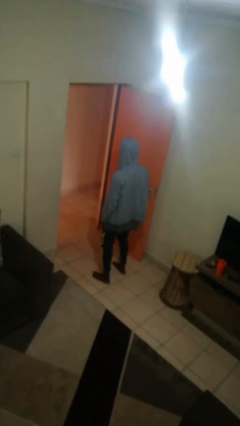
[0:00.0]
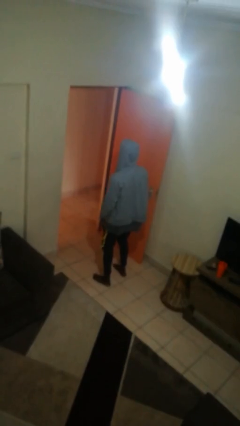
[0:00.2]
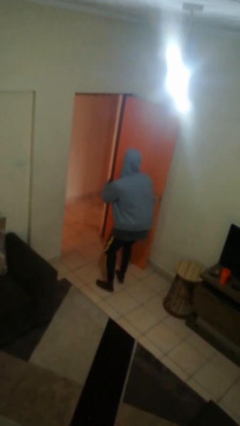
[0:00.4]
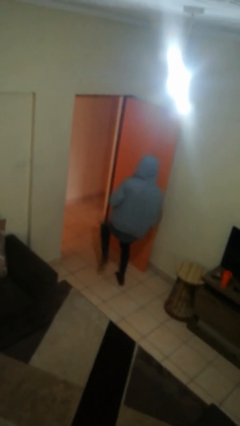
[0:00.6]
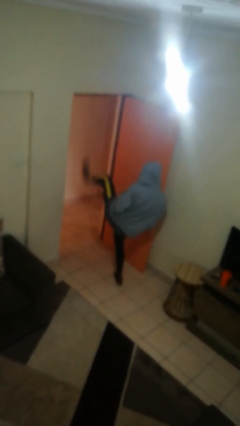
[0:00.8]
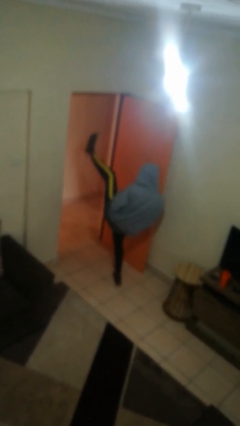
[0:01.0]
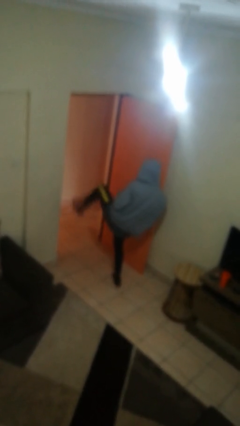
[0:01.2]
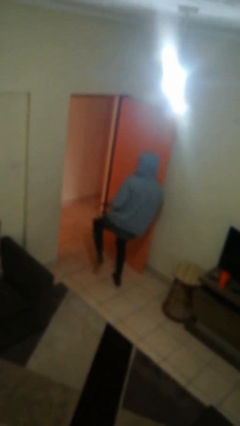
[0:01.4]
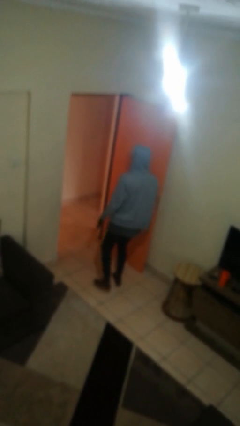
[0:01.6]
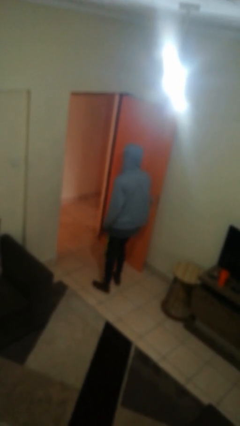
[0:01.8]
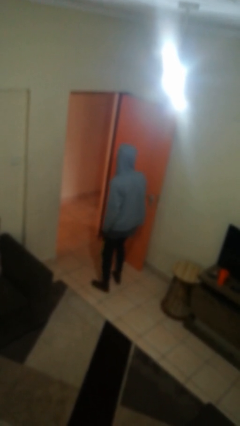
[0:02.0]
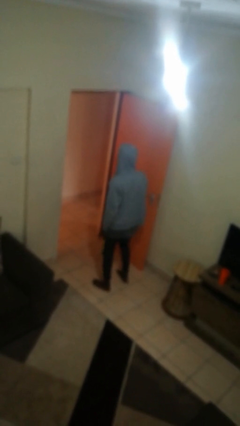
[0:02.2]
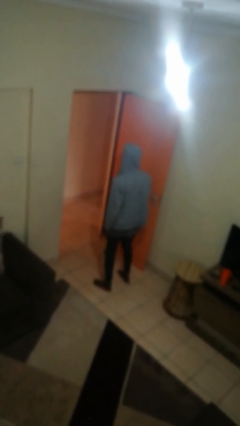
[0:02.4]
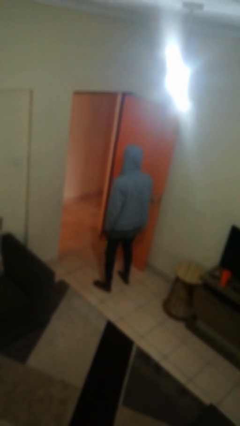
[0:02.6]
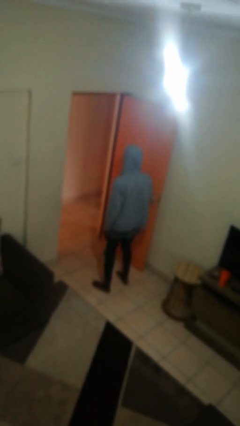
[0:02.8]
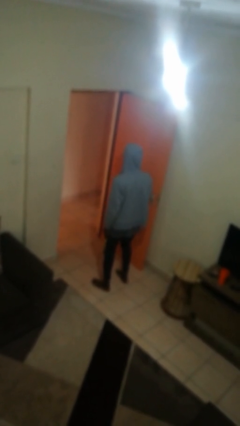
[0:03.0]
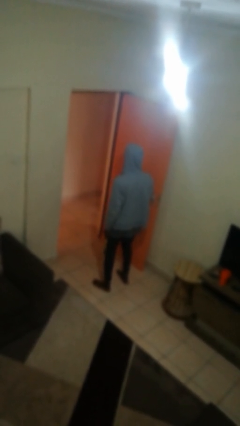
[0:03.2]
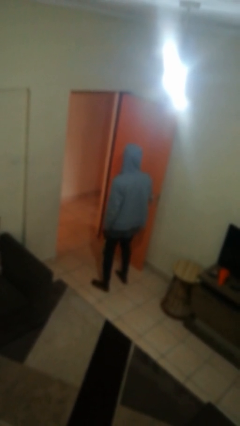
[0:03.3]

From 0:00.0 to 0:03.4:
person karate kicks

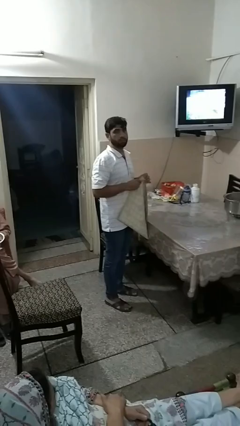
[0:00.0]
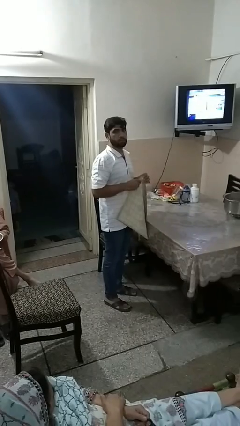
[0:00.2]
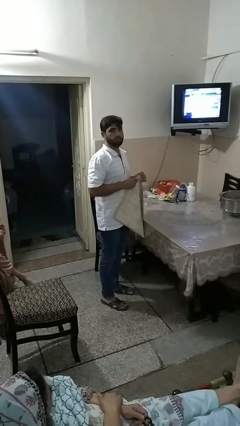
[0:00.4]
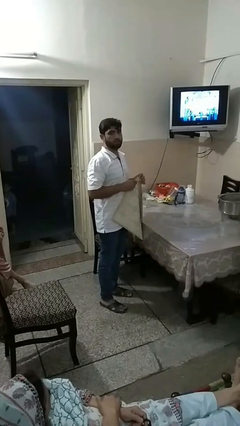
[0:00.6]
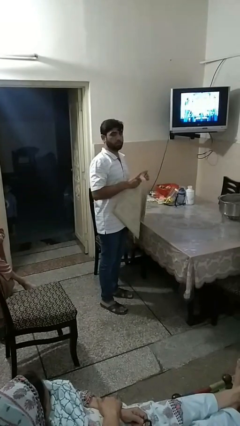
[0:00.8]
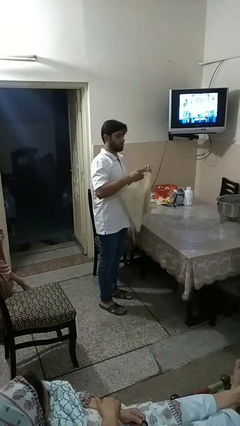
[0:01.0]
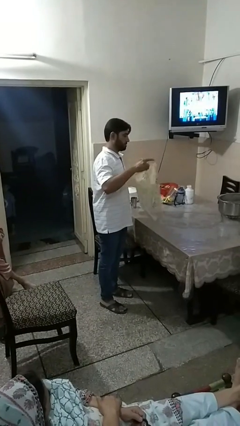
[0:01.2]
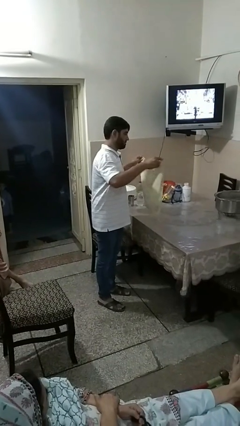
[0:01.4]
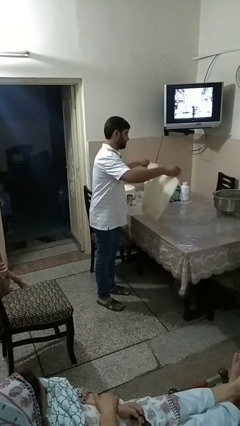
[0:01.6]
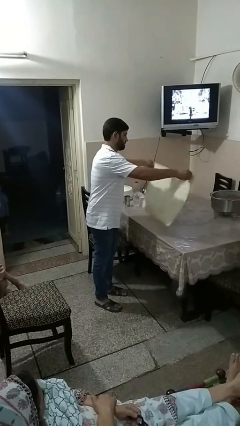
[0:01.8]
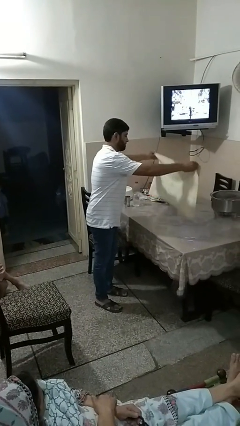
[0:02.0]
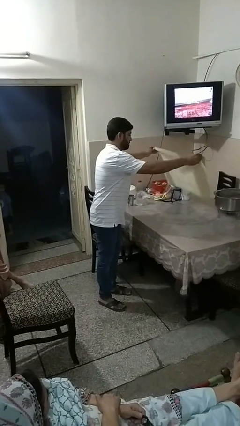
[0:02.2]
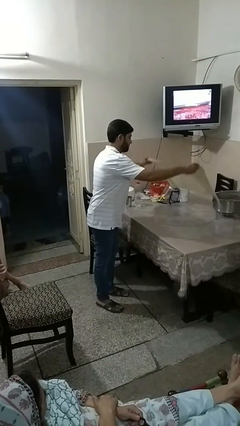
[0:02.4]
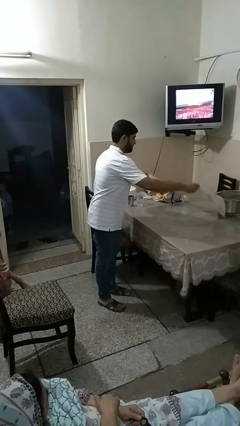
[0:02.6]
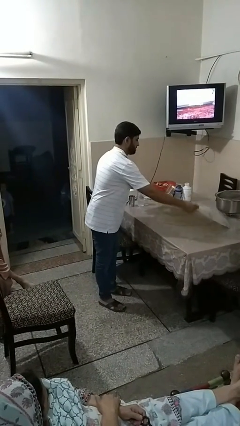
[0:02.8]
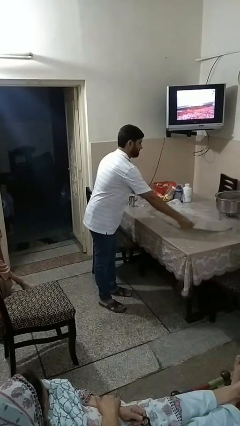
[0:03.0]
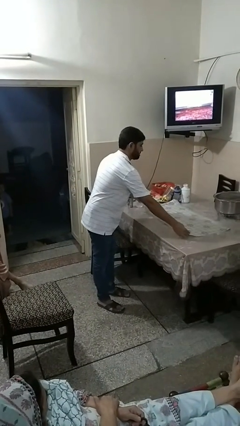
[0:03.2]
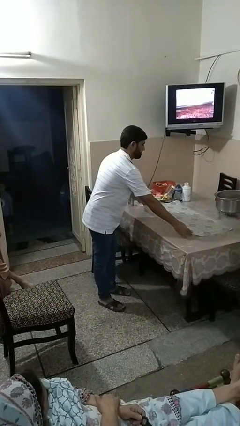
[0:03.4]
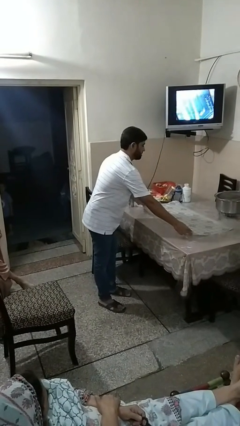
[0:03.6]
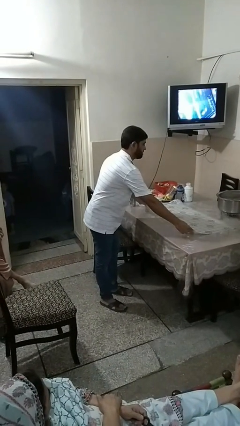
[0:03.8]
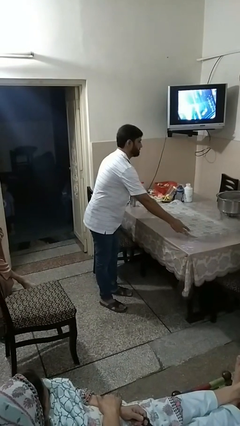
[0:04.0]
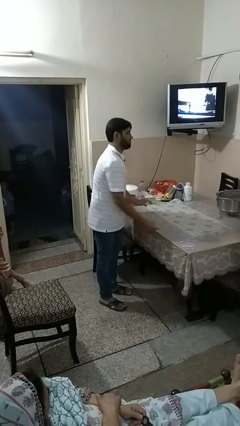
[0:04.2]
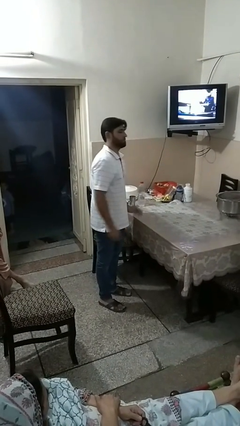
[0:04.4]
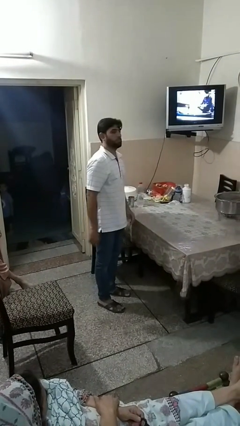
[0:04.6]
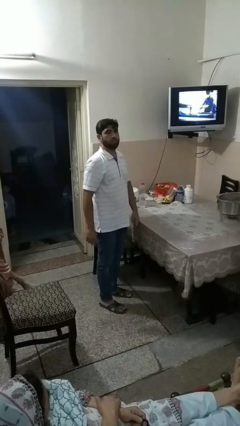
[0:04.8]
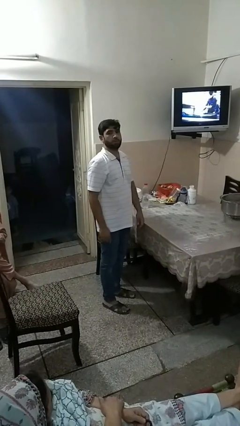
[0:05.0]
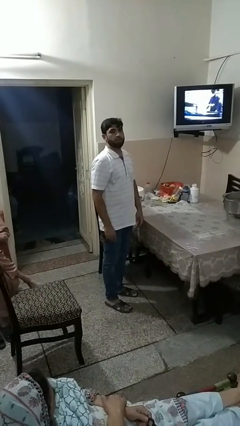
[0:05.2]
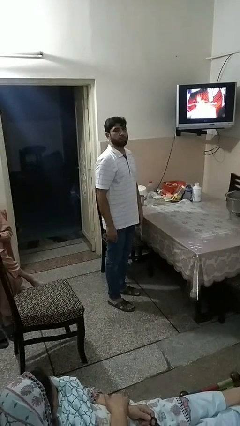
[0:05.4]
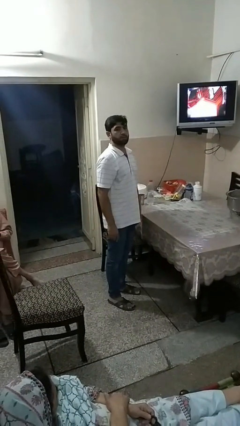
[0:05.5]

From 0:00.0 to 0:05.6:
person spreads tablecloth

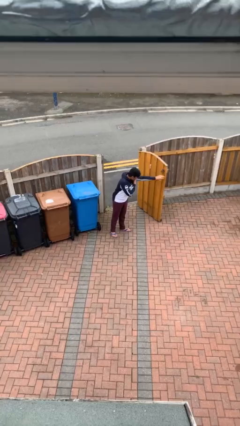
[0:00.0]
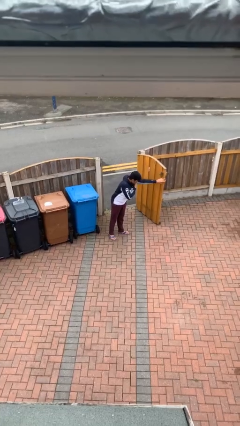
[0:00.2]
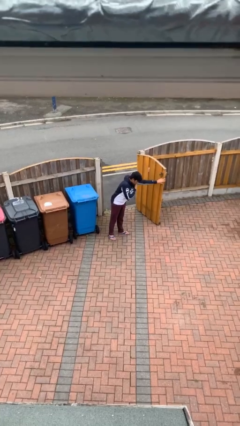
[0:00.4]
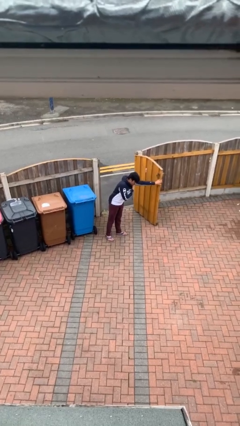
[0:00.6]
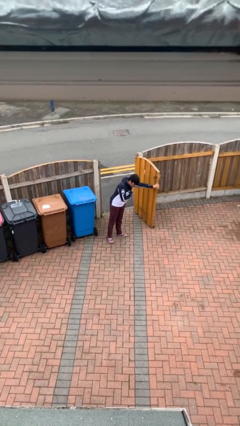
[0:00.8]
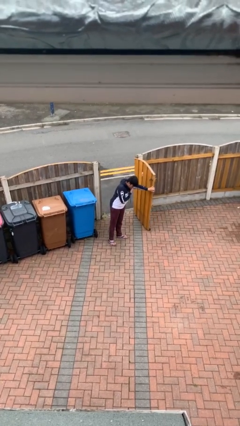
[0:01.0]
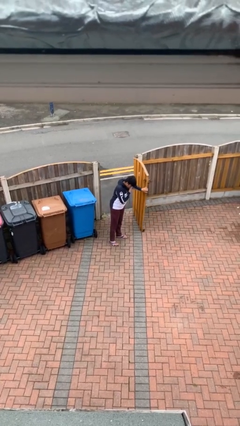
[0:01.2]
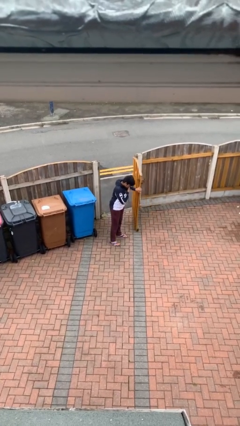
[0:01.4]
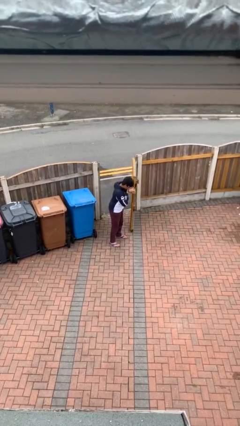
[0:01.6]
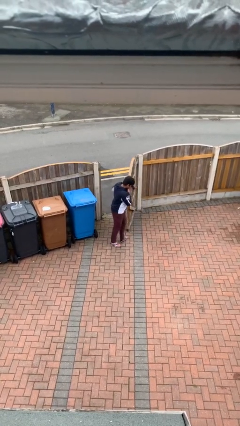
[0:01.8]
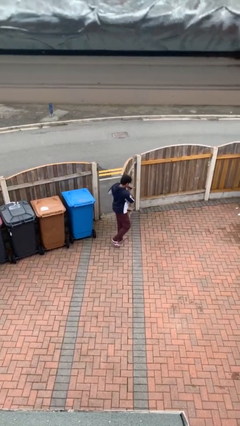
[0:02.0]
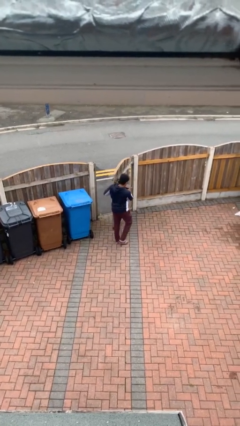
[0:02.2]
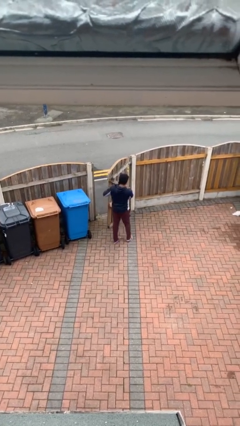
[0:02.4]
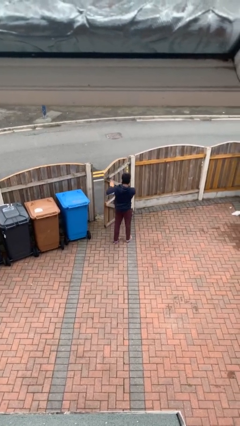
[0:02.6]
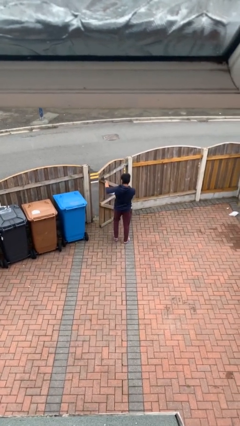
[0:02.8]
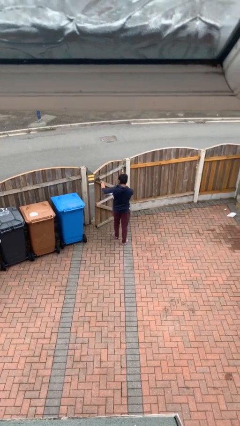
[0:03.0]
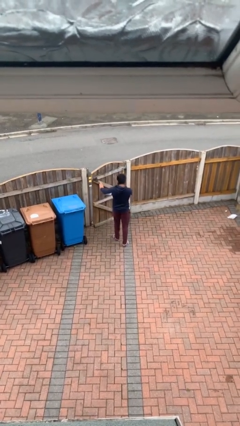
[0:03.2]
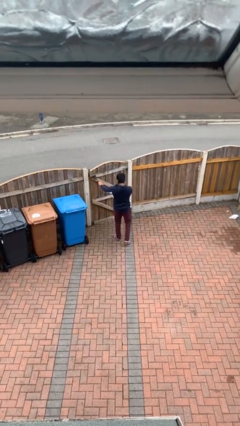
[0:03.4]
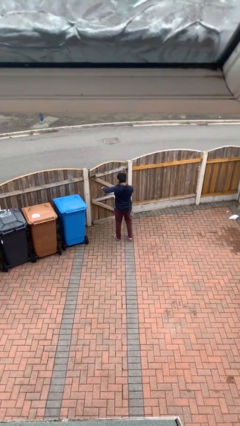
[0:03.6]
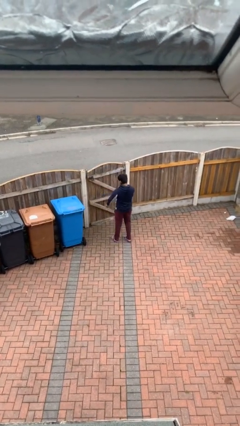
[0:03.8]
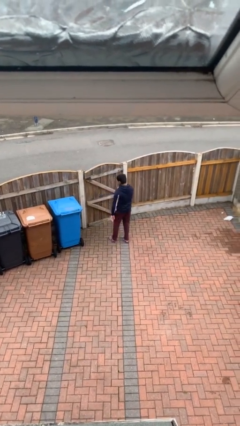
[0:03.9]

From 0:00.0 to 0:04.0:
person closes facility door

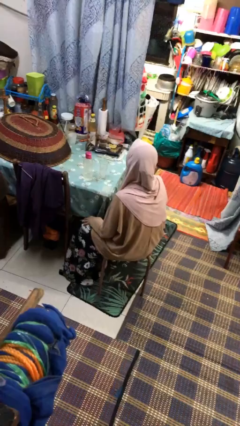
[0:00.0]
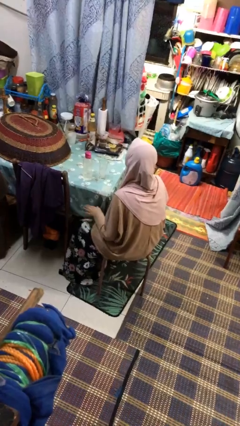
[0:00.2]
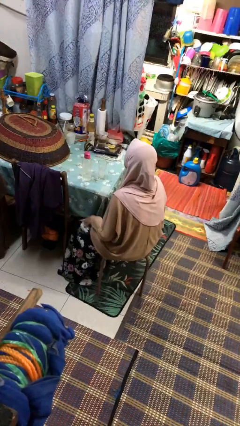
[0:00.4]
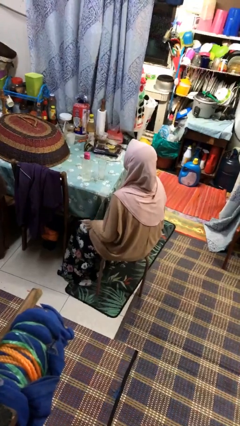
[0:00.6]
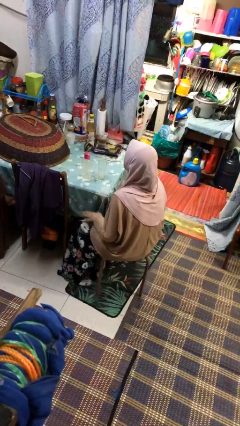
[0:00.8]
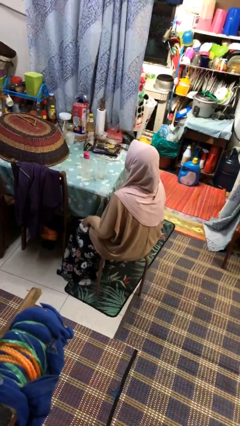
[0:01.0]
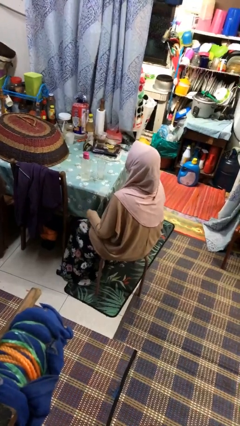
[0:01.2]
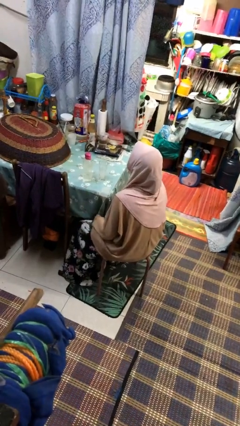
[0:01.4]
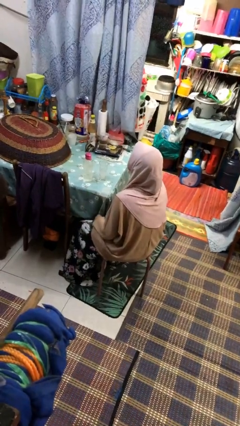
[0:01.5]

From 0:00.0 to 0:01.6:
person slaps hands on thighs

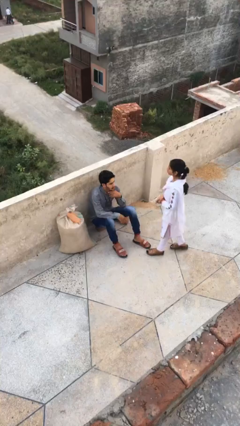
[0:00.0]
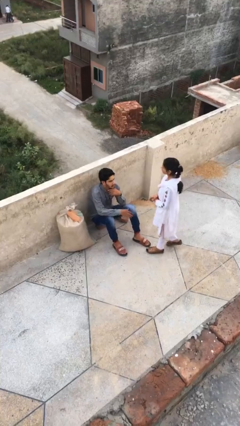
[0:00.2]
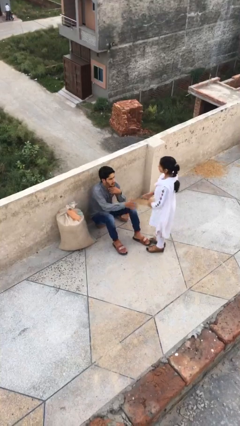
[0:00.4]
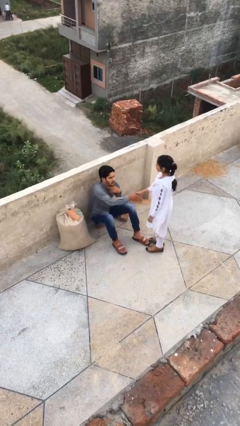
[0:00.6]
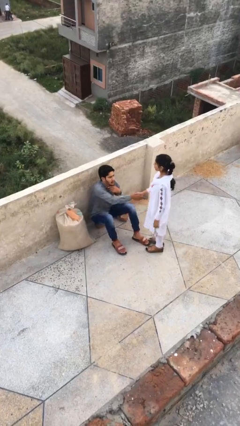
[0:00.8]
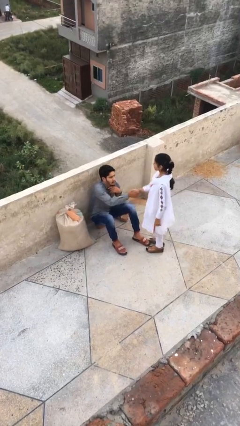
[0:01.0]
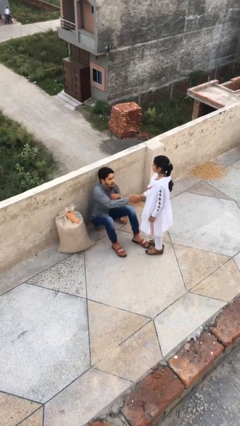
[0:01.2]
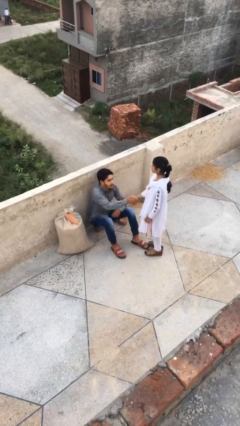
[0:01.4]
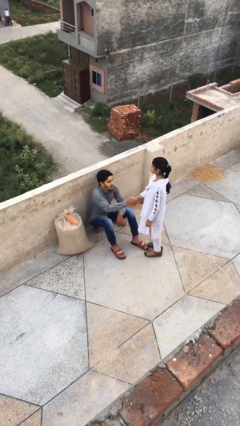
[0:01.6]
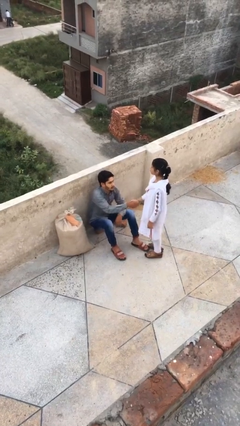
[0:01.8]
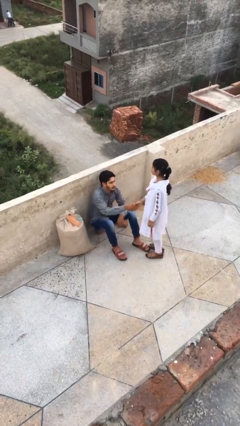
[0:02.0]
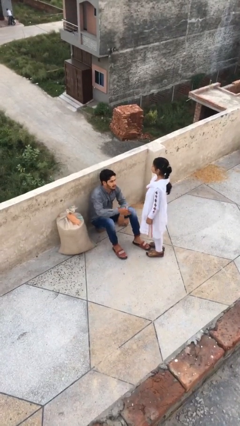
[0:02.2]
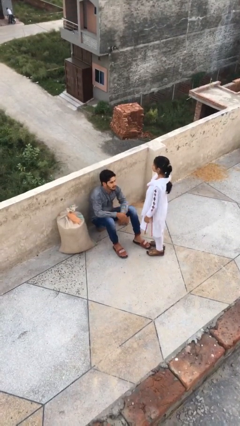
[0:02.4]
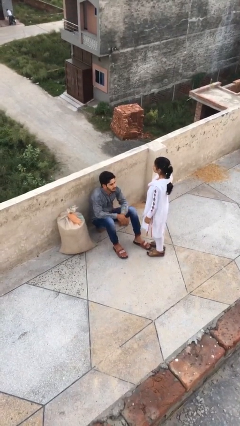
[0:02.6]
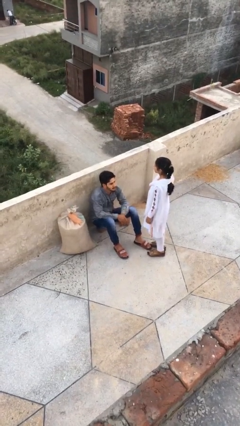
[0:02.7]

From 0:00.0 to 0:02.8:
person shakes hand

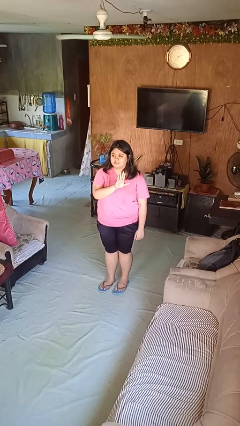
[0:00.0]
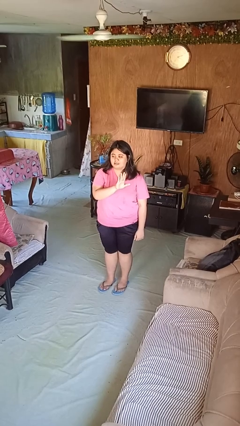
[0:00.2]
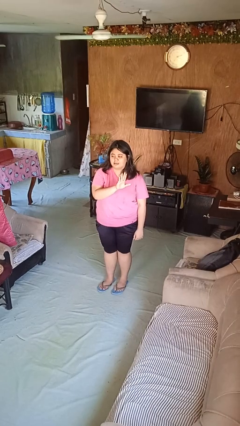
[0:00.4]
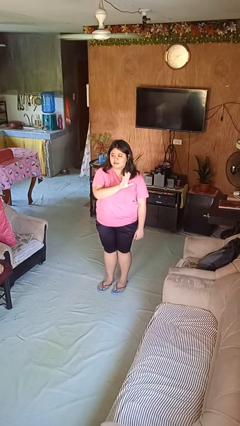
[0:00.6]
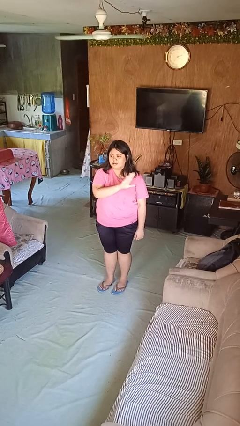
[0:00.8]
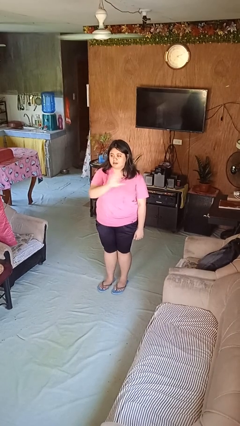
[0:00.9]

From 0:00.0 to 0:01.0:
person gestures swipe right
